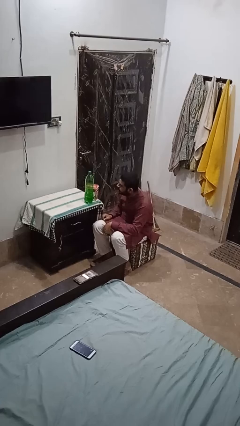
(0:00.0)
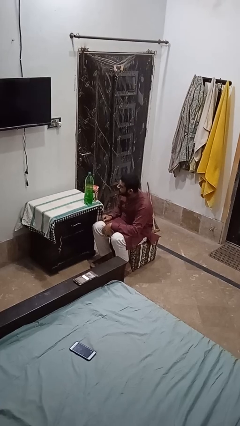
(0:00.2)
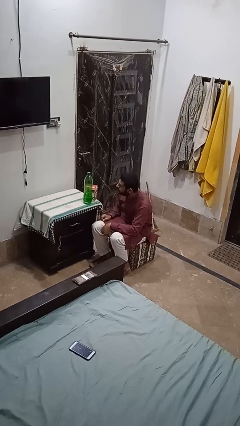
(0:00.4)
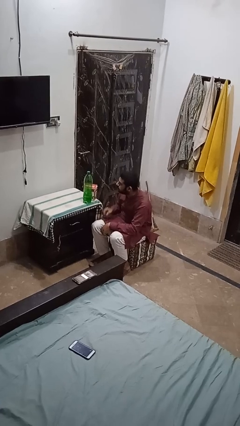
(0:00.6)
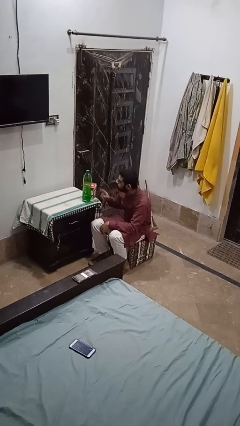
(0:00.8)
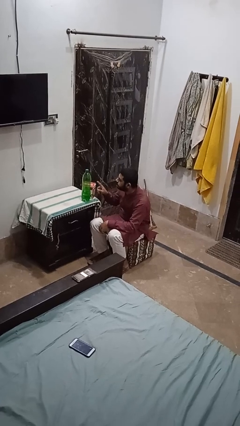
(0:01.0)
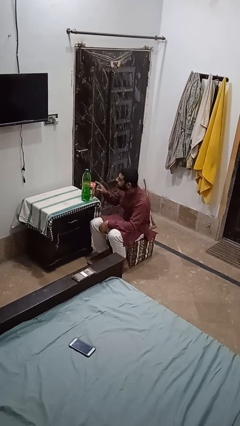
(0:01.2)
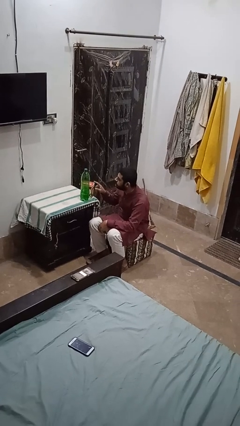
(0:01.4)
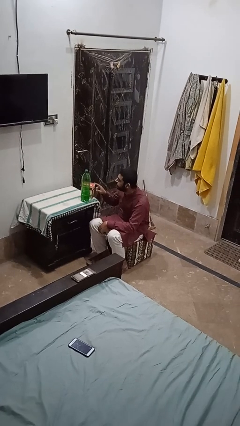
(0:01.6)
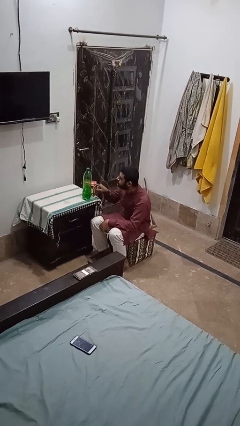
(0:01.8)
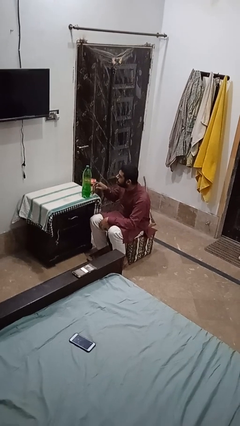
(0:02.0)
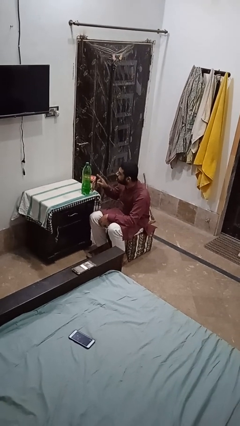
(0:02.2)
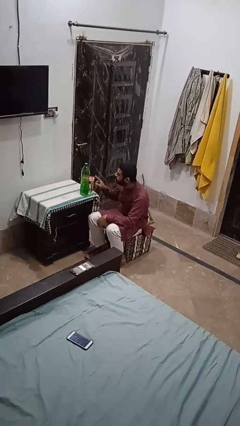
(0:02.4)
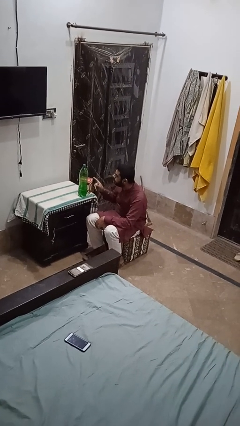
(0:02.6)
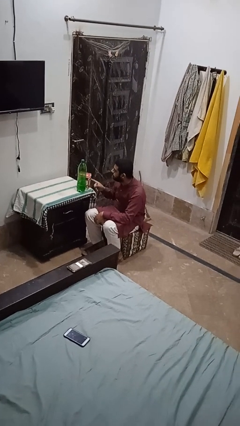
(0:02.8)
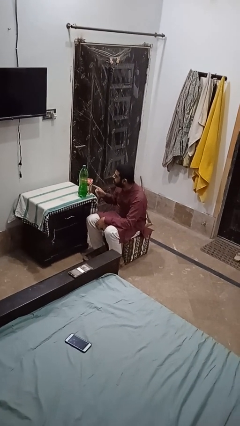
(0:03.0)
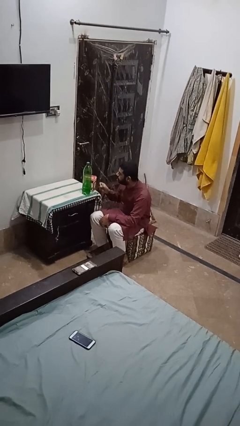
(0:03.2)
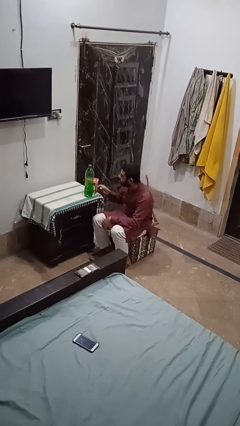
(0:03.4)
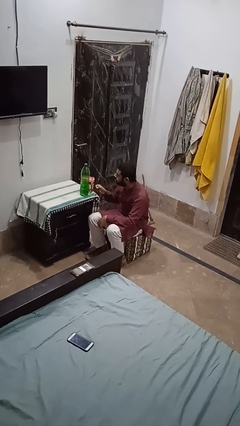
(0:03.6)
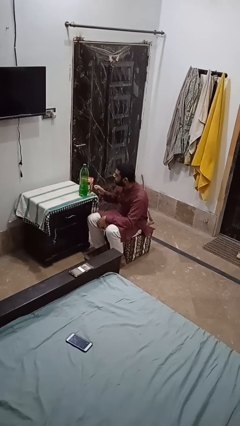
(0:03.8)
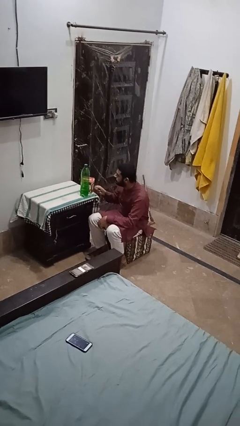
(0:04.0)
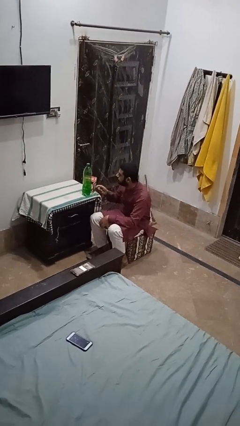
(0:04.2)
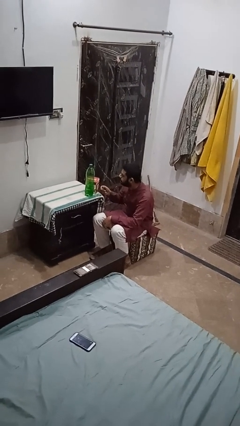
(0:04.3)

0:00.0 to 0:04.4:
person taps object with finger

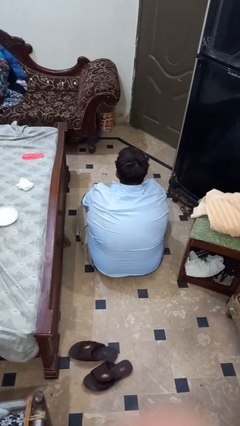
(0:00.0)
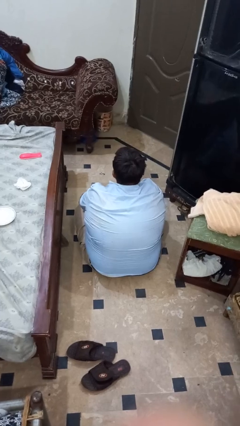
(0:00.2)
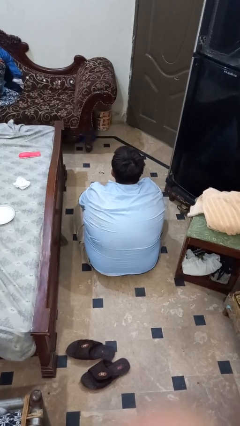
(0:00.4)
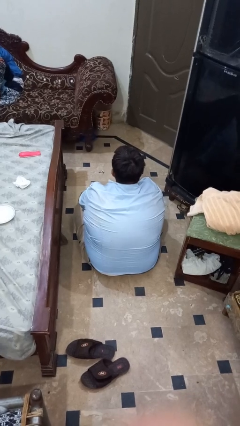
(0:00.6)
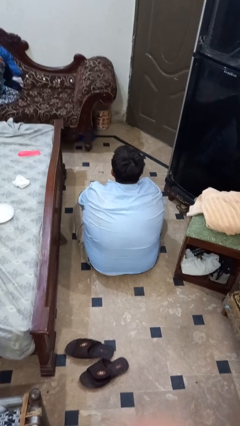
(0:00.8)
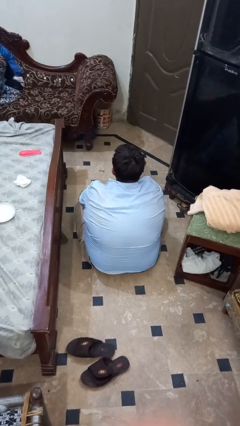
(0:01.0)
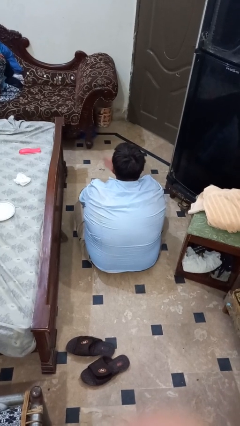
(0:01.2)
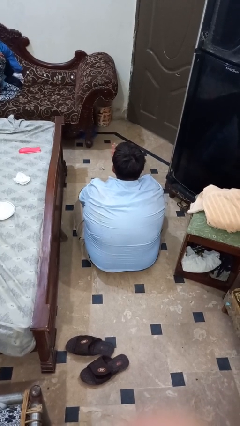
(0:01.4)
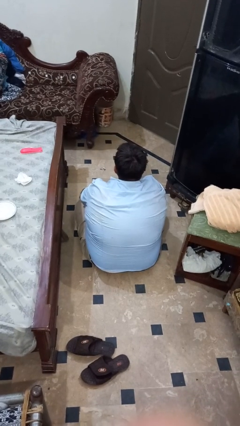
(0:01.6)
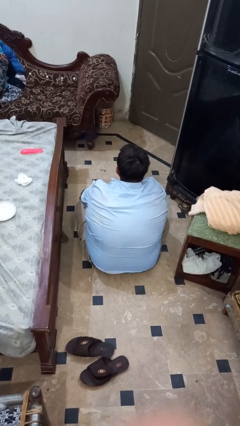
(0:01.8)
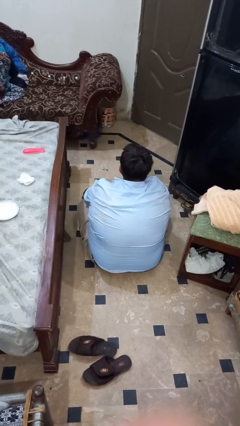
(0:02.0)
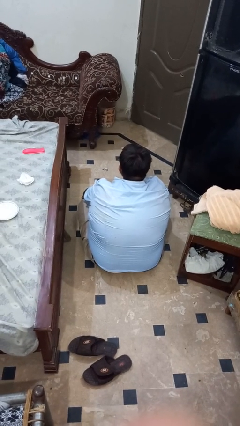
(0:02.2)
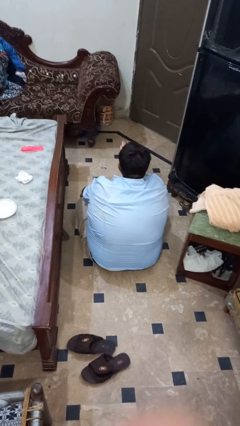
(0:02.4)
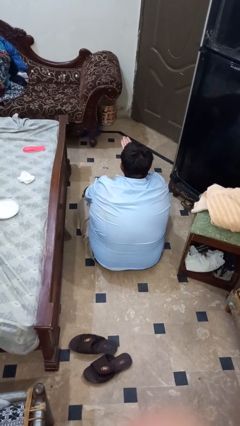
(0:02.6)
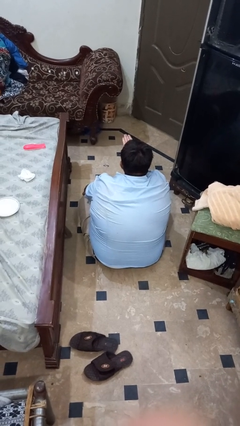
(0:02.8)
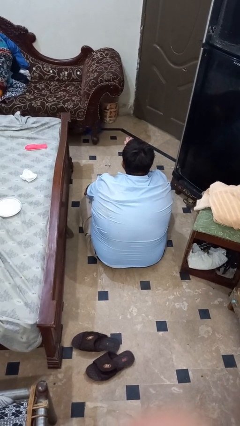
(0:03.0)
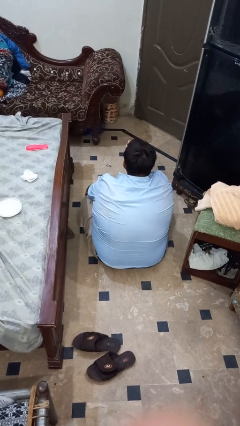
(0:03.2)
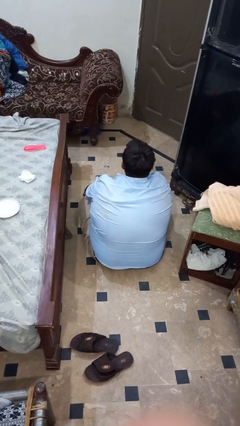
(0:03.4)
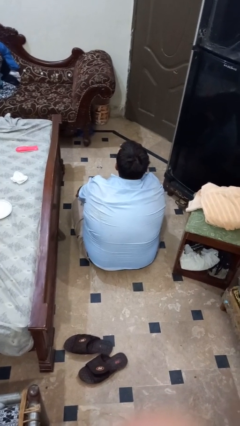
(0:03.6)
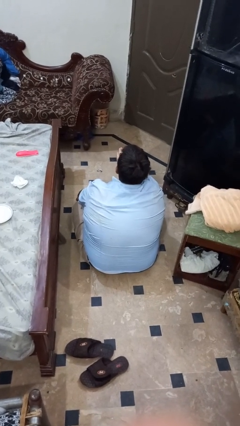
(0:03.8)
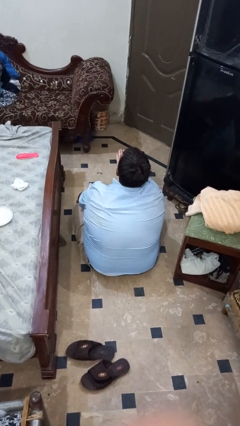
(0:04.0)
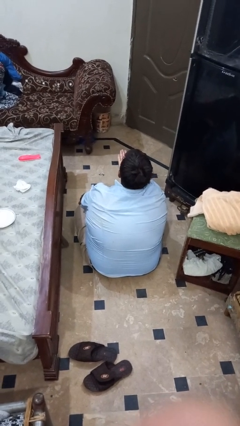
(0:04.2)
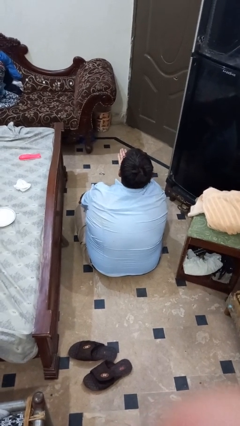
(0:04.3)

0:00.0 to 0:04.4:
person gestures blow kiss

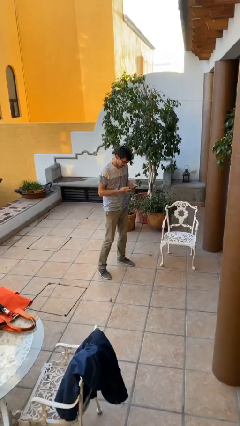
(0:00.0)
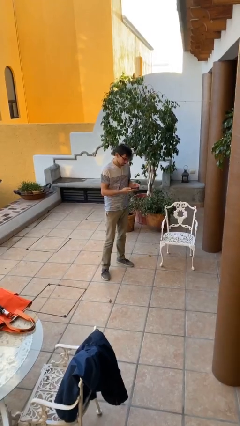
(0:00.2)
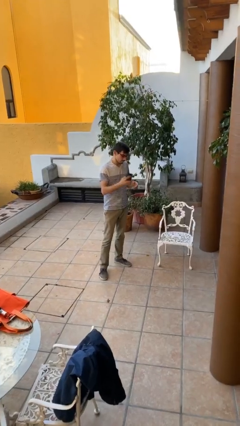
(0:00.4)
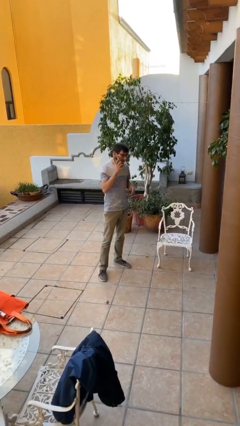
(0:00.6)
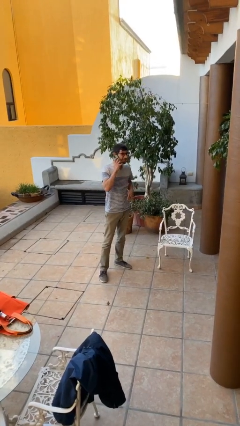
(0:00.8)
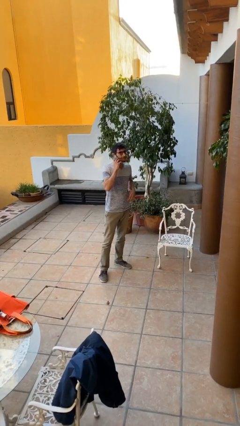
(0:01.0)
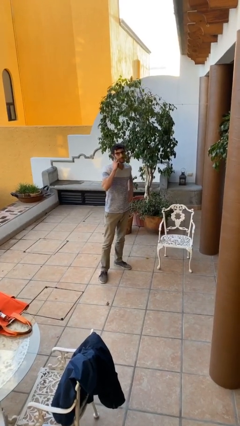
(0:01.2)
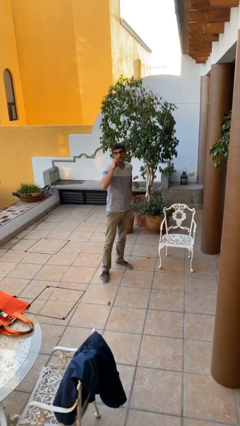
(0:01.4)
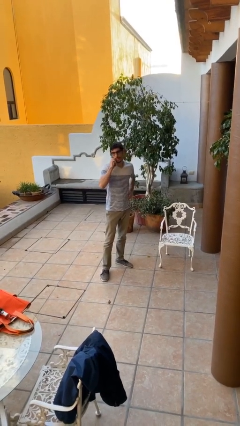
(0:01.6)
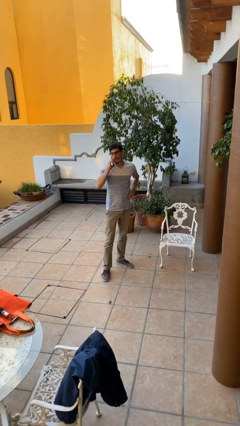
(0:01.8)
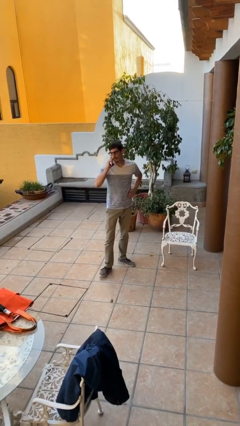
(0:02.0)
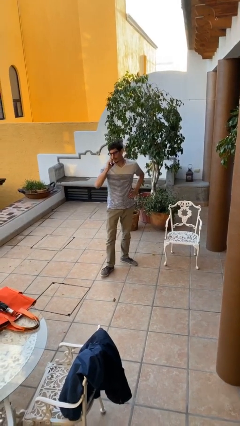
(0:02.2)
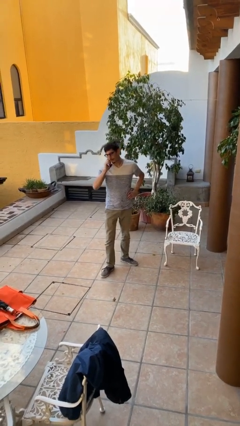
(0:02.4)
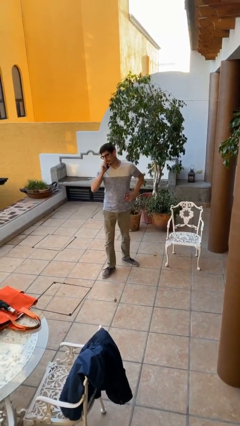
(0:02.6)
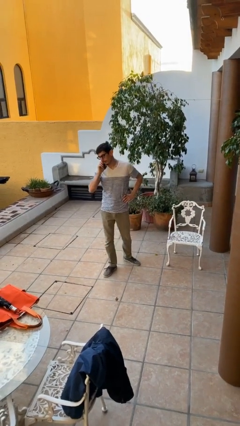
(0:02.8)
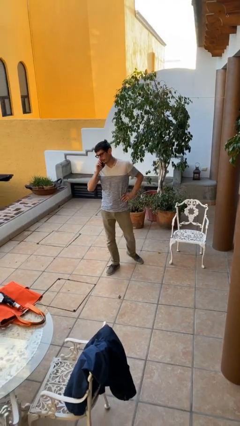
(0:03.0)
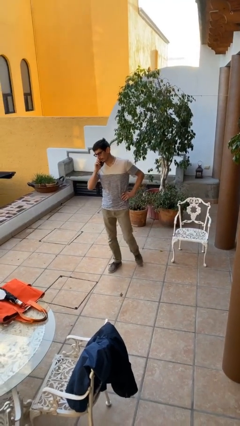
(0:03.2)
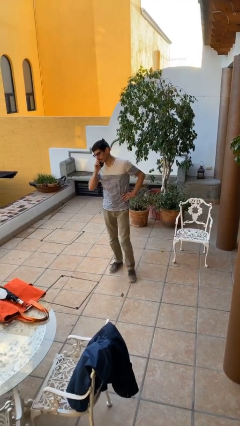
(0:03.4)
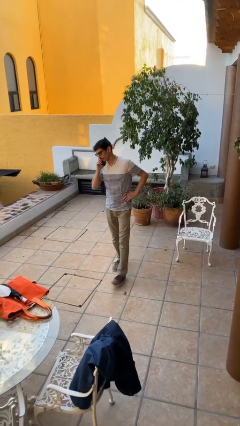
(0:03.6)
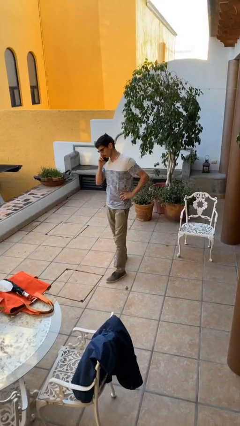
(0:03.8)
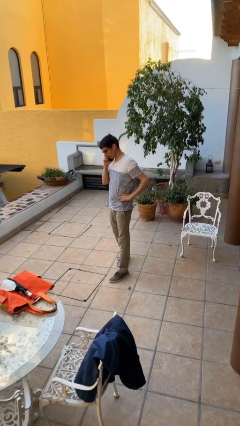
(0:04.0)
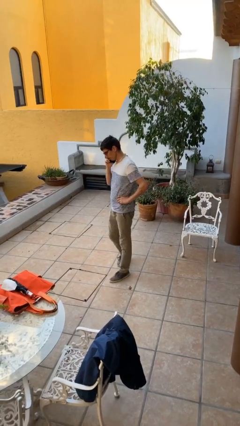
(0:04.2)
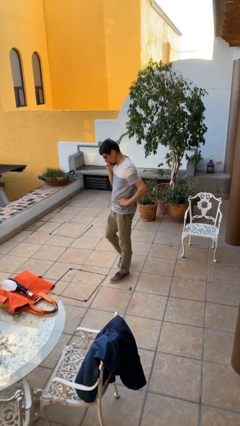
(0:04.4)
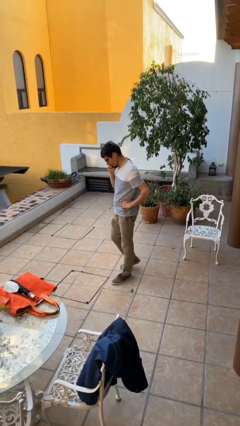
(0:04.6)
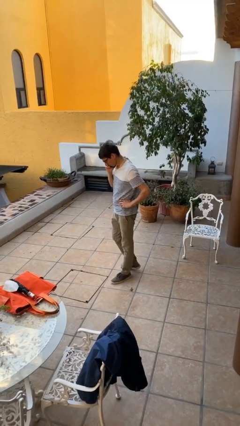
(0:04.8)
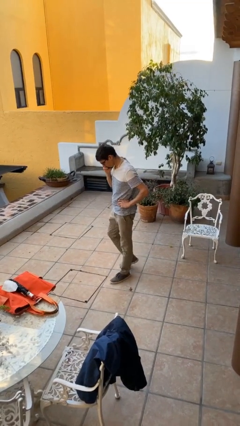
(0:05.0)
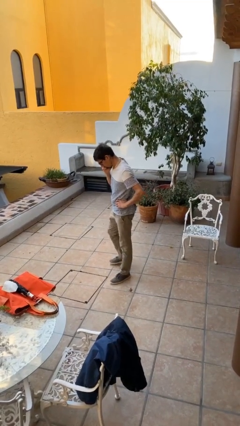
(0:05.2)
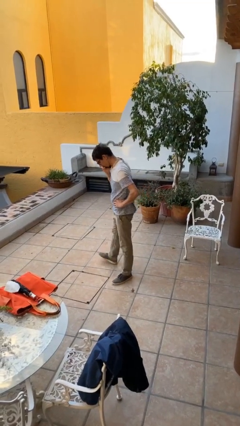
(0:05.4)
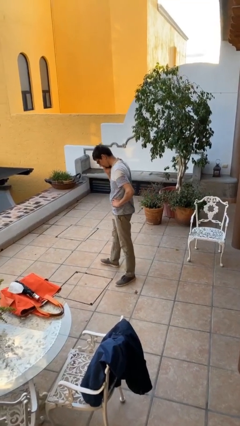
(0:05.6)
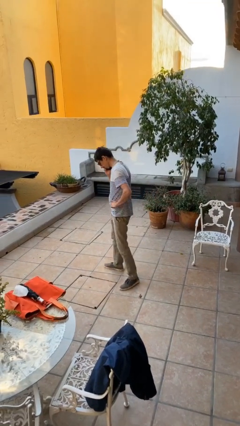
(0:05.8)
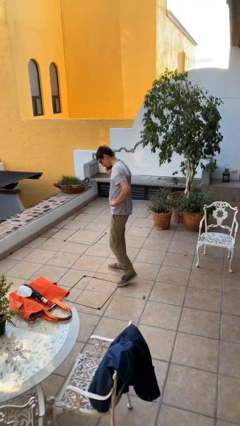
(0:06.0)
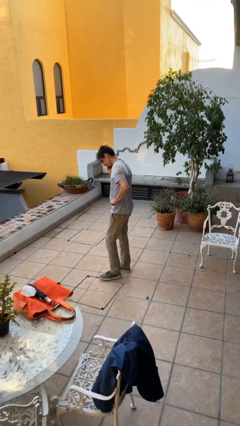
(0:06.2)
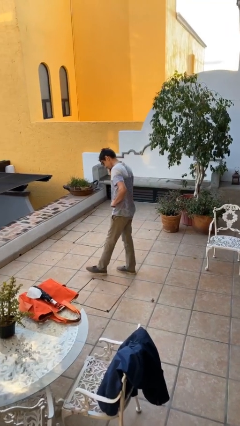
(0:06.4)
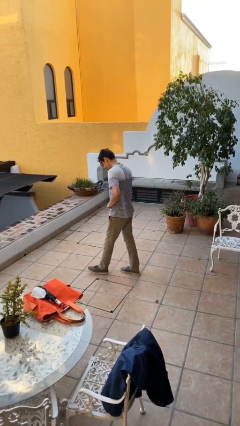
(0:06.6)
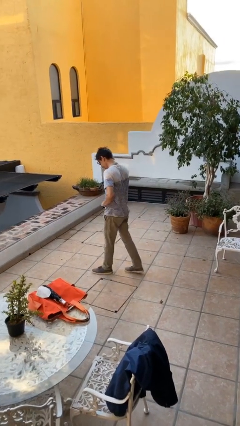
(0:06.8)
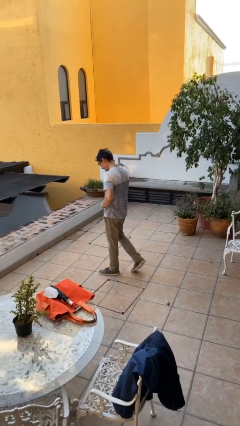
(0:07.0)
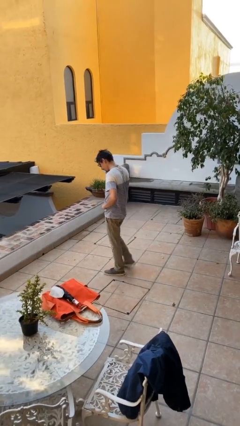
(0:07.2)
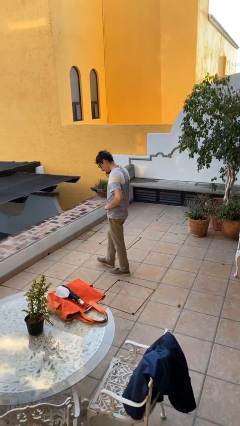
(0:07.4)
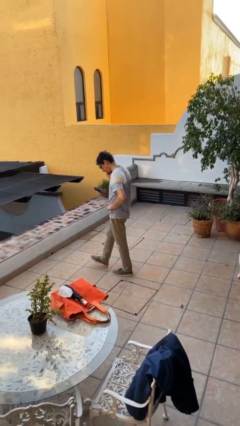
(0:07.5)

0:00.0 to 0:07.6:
person talks on phone

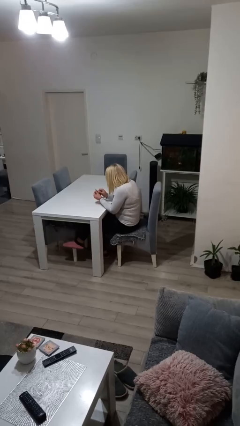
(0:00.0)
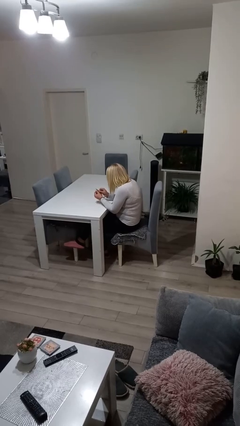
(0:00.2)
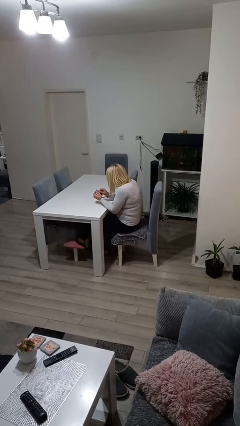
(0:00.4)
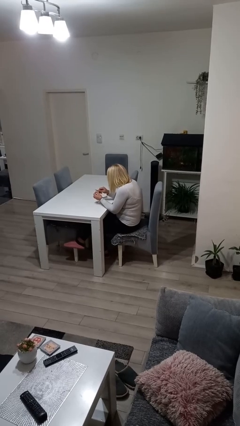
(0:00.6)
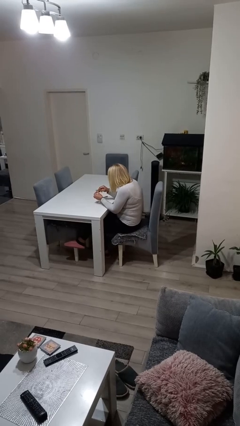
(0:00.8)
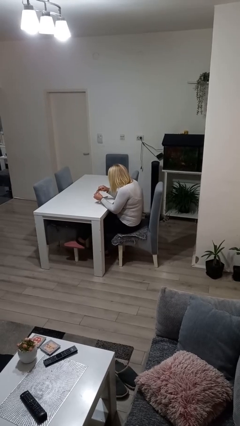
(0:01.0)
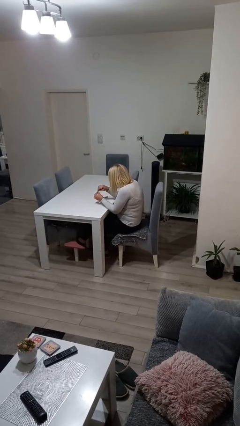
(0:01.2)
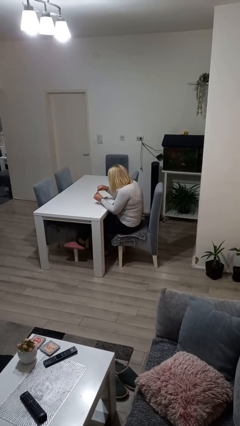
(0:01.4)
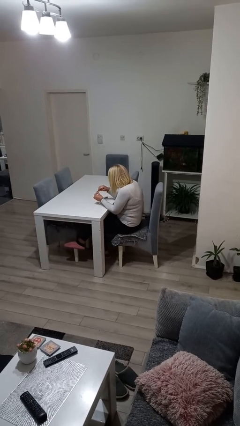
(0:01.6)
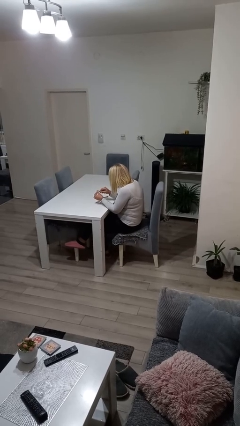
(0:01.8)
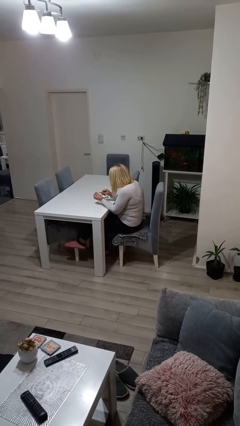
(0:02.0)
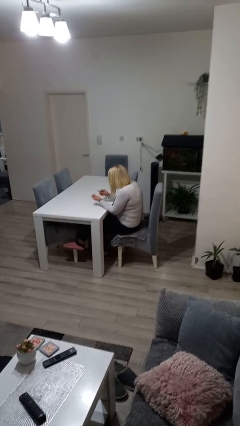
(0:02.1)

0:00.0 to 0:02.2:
person files fingernails
